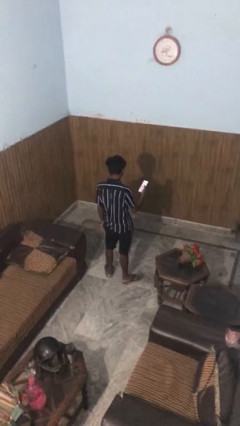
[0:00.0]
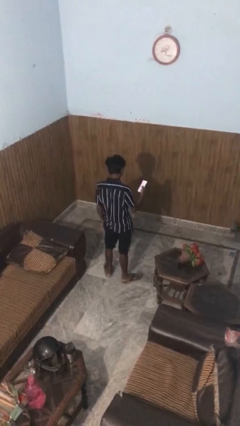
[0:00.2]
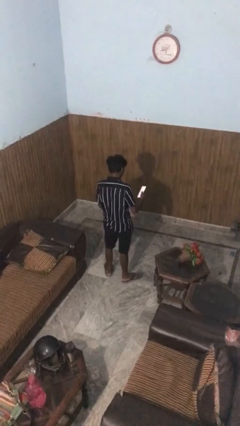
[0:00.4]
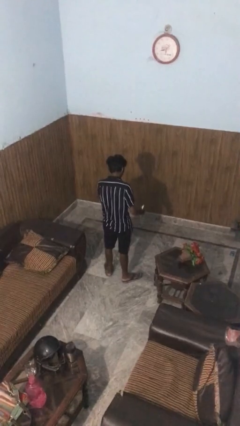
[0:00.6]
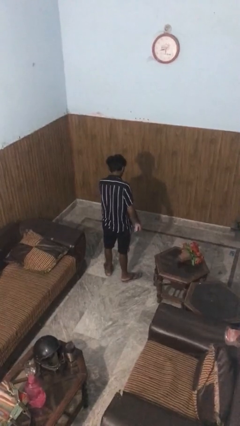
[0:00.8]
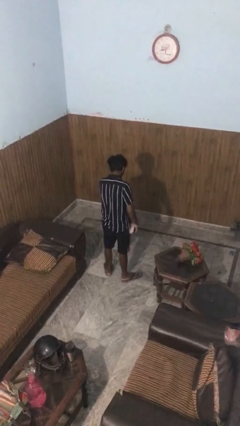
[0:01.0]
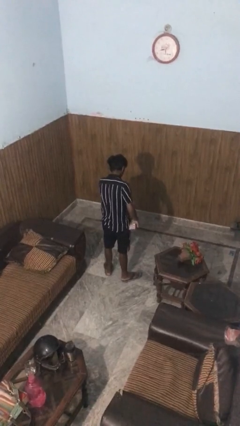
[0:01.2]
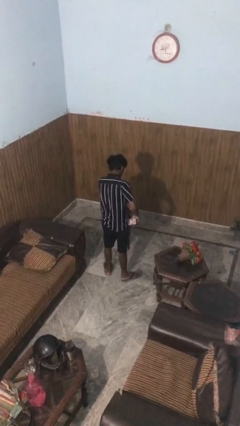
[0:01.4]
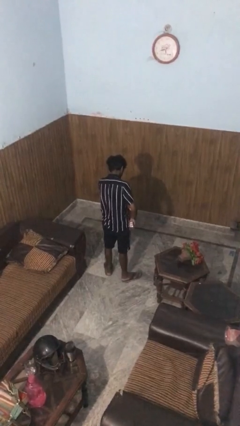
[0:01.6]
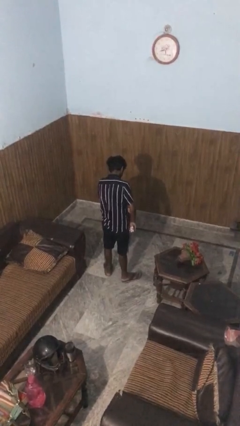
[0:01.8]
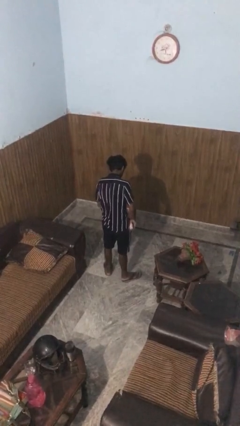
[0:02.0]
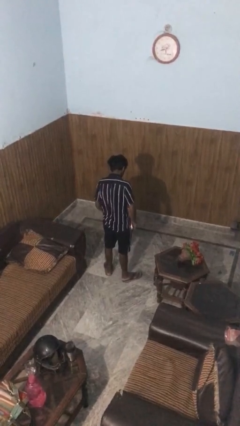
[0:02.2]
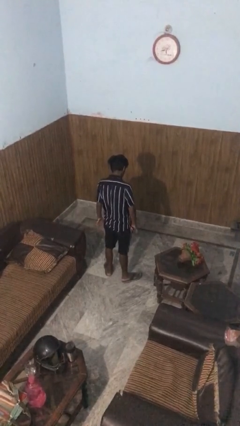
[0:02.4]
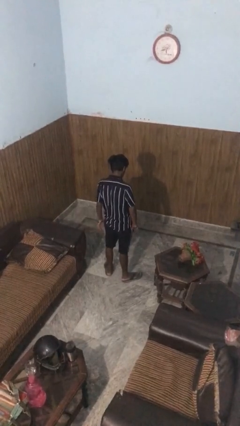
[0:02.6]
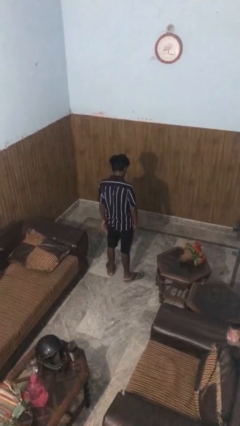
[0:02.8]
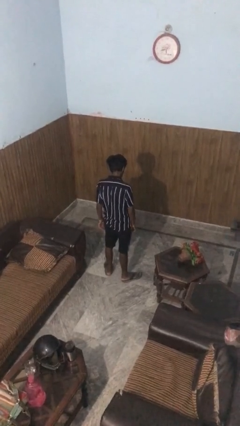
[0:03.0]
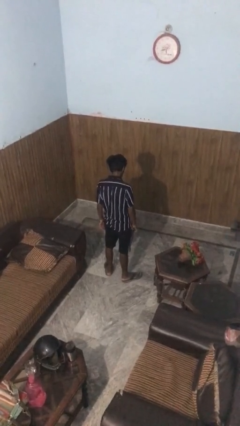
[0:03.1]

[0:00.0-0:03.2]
person puts phone into pocket

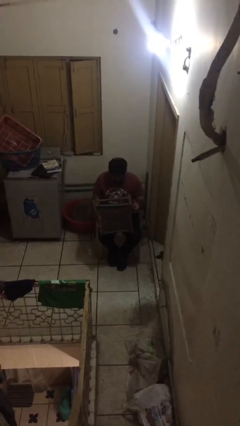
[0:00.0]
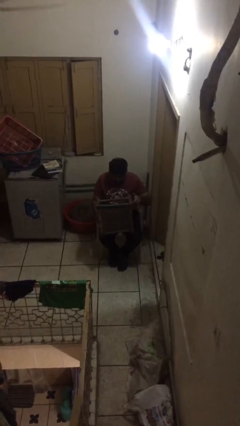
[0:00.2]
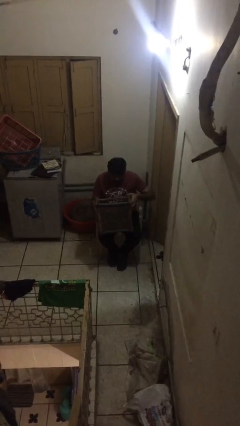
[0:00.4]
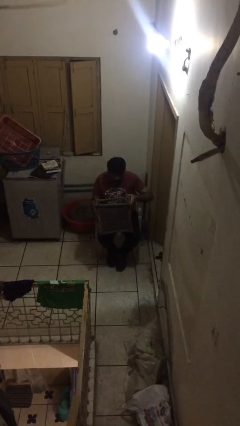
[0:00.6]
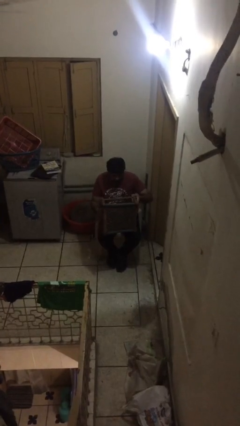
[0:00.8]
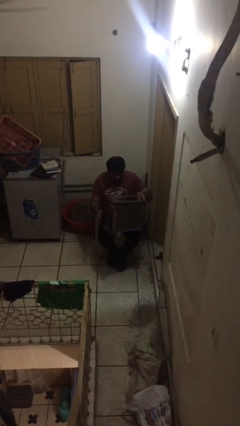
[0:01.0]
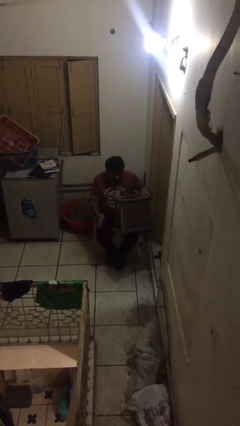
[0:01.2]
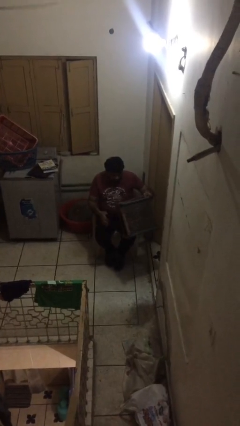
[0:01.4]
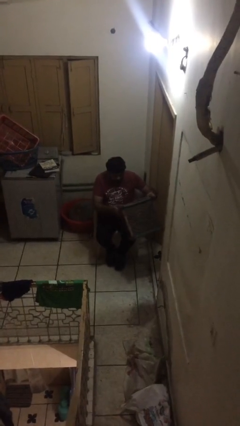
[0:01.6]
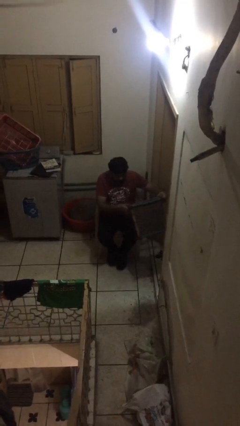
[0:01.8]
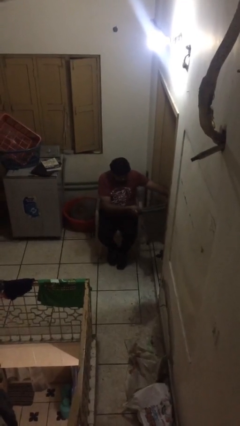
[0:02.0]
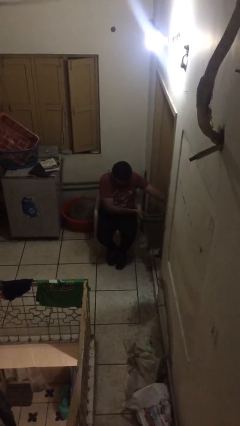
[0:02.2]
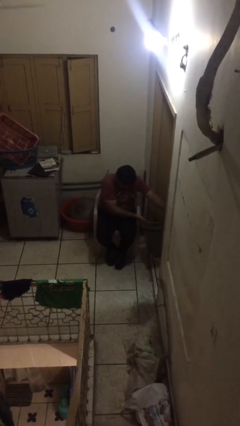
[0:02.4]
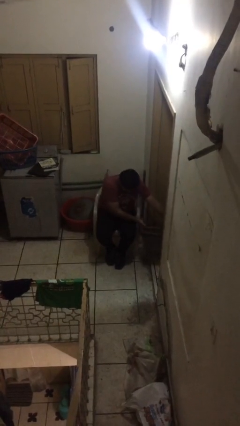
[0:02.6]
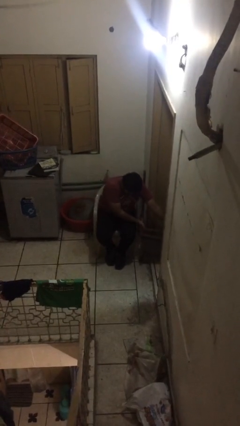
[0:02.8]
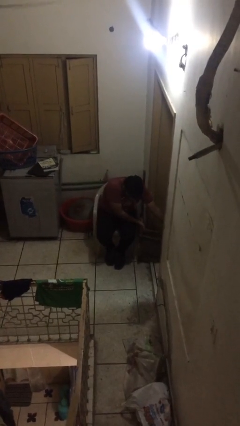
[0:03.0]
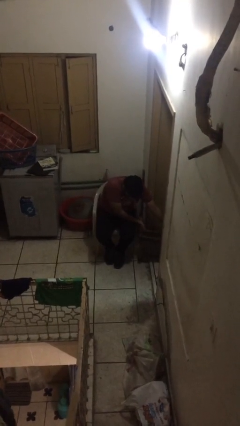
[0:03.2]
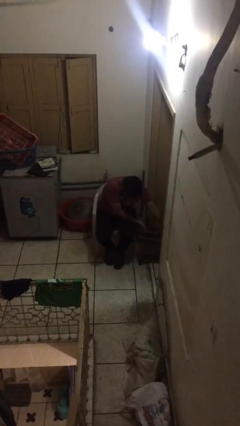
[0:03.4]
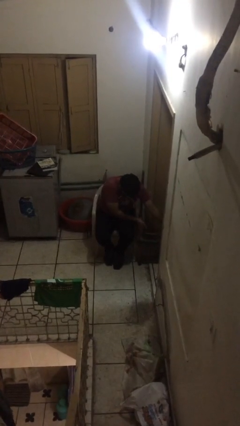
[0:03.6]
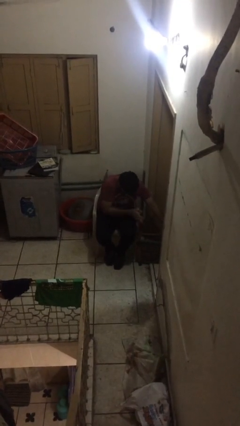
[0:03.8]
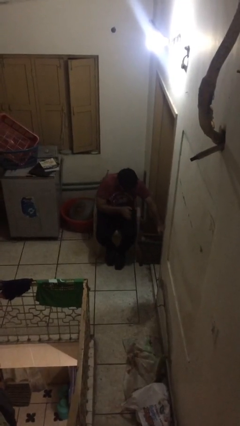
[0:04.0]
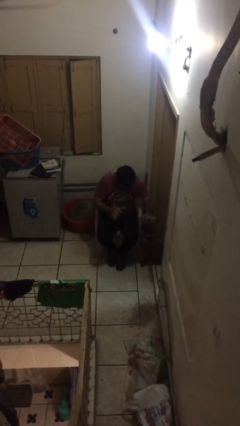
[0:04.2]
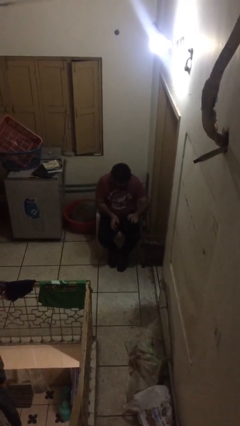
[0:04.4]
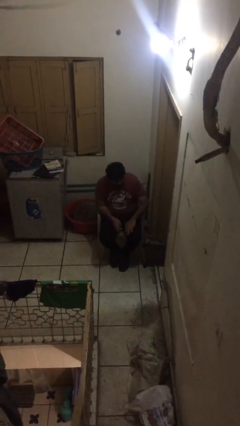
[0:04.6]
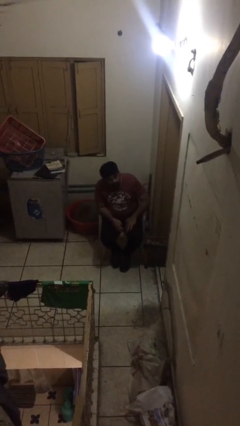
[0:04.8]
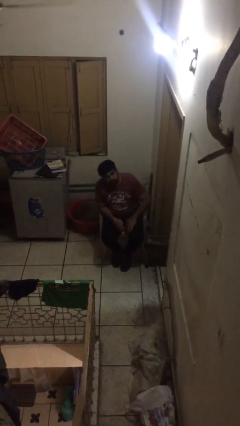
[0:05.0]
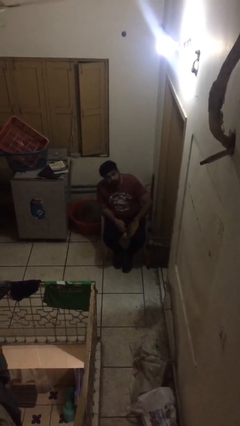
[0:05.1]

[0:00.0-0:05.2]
person puts down object on floor

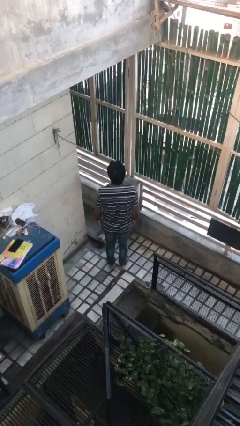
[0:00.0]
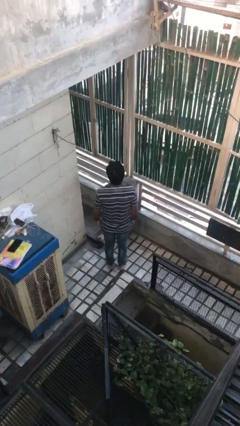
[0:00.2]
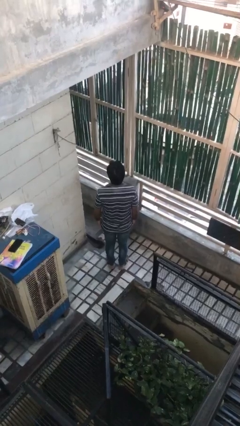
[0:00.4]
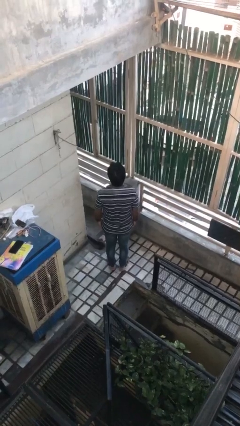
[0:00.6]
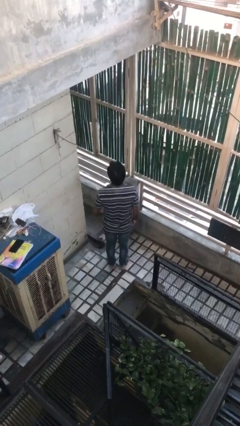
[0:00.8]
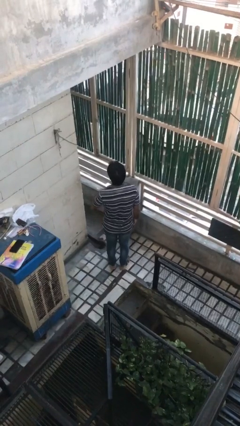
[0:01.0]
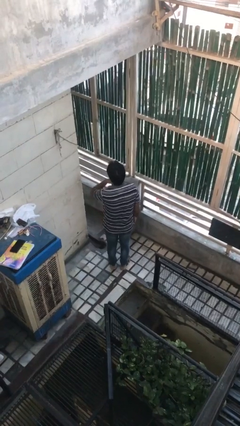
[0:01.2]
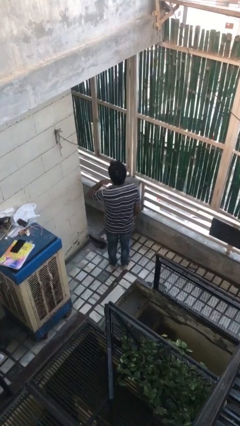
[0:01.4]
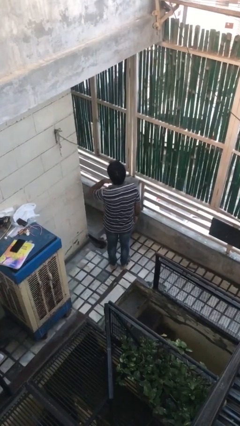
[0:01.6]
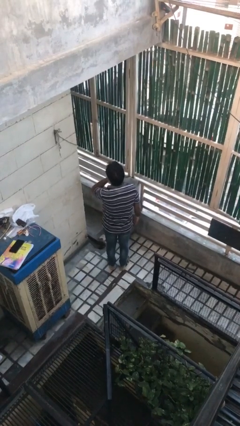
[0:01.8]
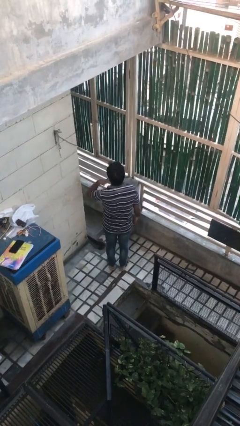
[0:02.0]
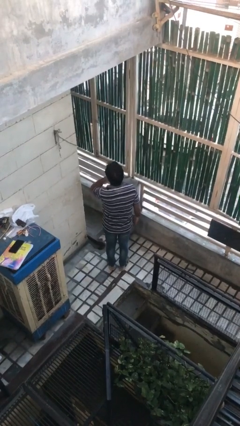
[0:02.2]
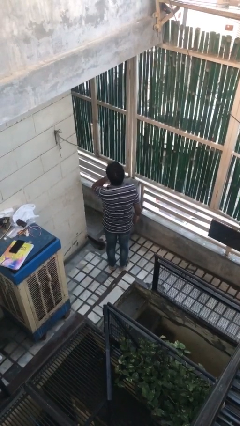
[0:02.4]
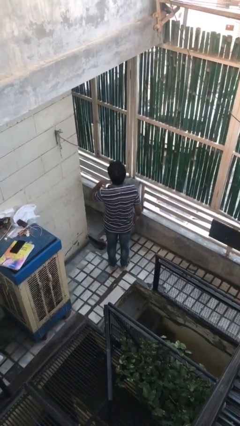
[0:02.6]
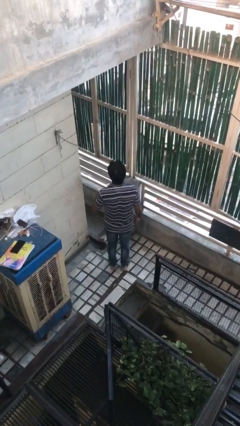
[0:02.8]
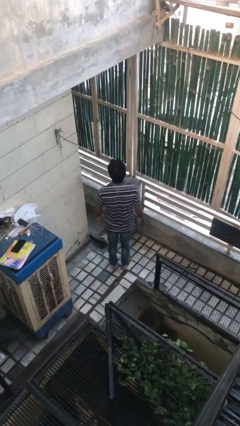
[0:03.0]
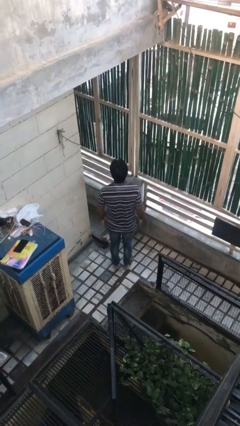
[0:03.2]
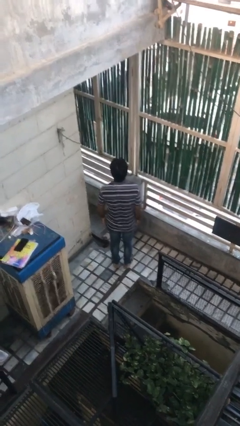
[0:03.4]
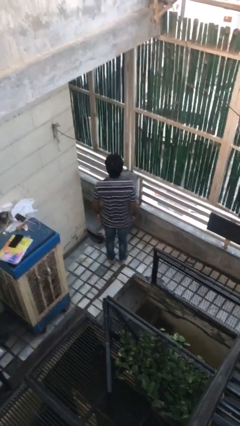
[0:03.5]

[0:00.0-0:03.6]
person gestures cut

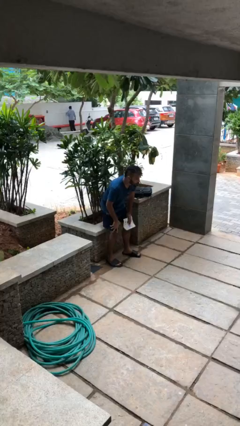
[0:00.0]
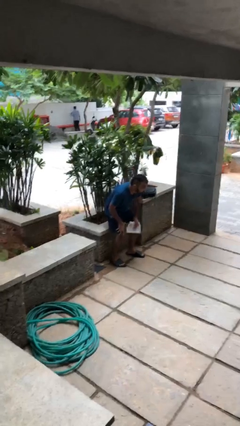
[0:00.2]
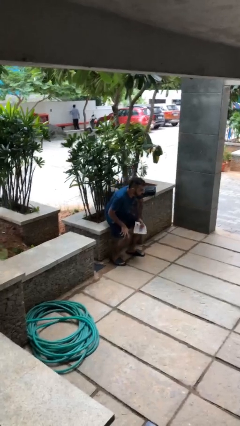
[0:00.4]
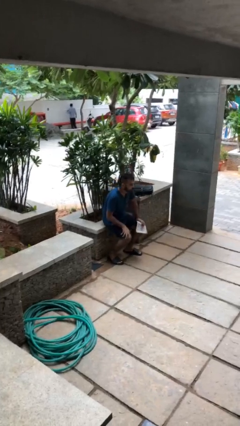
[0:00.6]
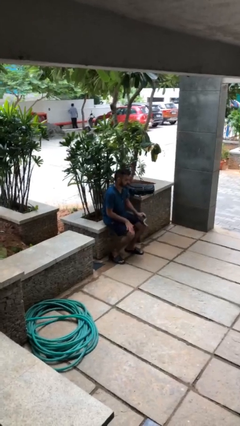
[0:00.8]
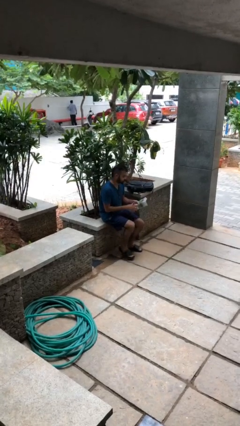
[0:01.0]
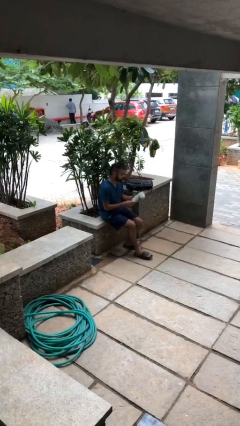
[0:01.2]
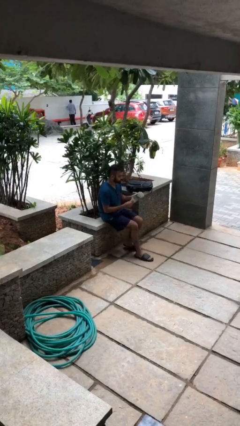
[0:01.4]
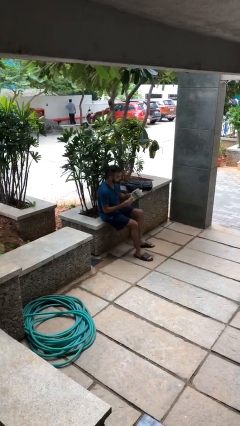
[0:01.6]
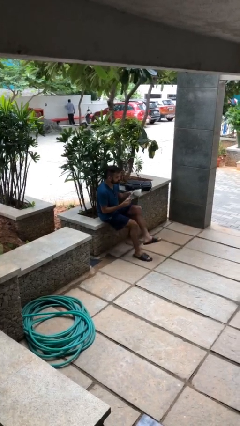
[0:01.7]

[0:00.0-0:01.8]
person sits down

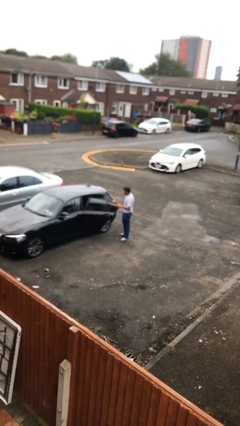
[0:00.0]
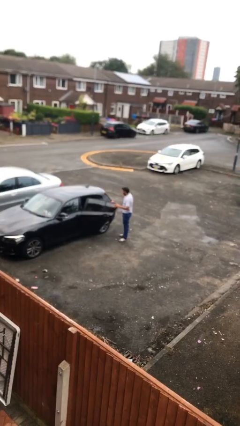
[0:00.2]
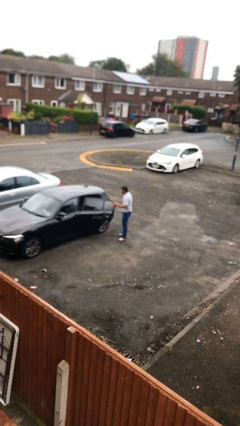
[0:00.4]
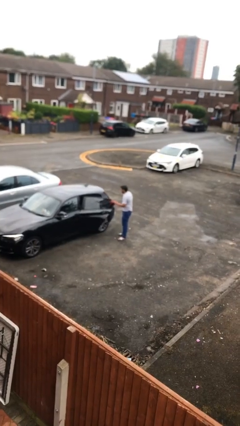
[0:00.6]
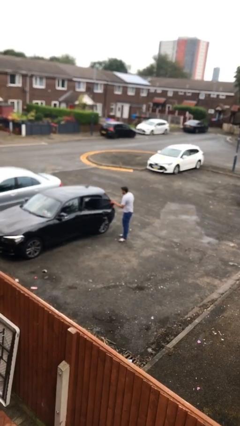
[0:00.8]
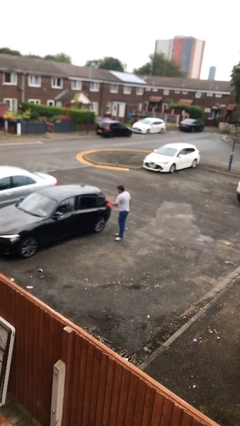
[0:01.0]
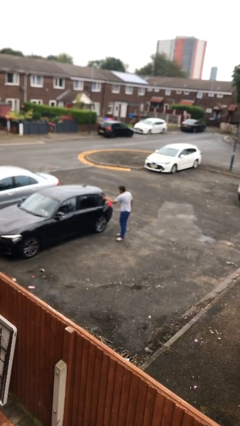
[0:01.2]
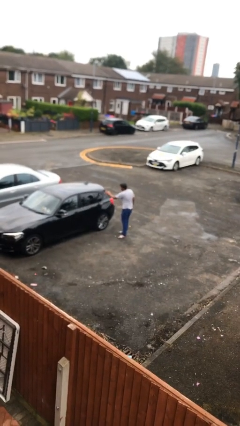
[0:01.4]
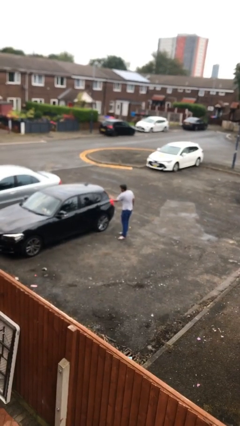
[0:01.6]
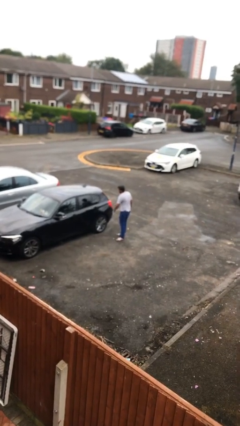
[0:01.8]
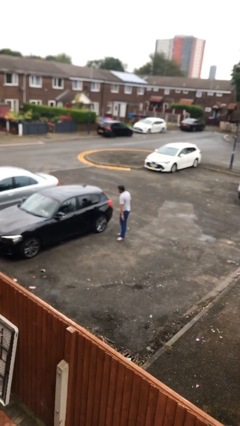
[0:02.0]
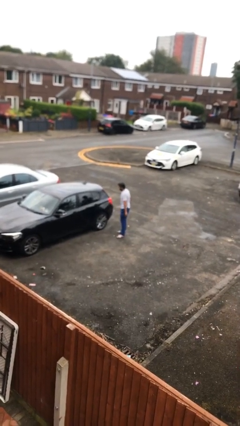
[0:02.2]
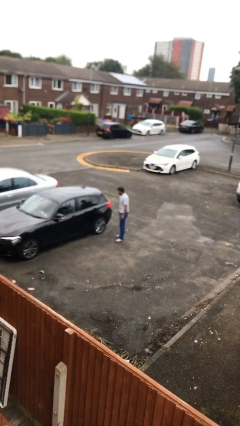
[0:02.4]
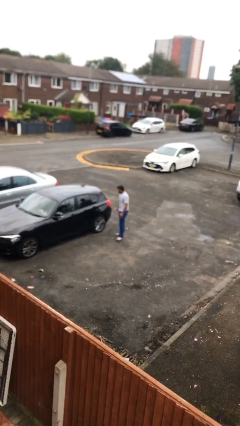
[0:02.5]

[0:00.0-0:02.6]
person closes car door

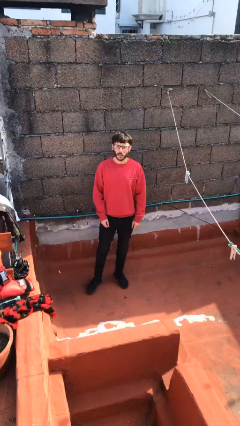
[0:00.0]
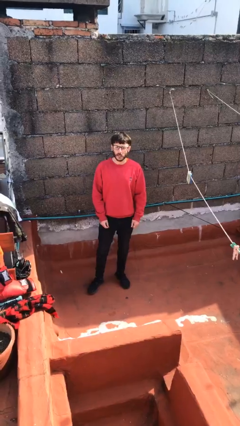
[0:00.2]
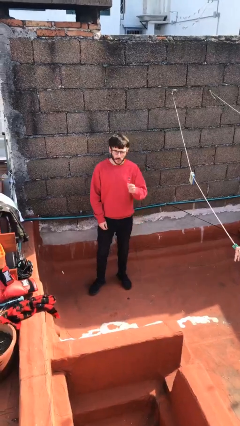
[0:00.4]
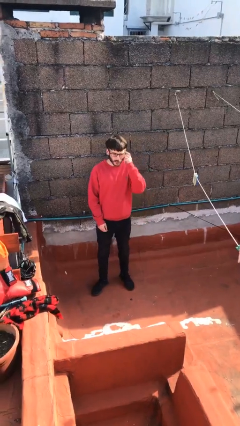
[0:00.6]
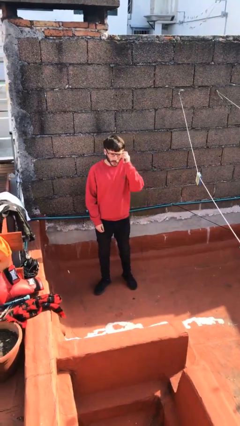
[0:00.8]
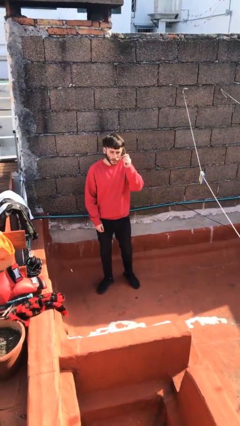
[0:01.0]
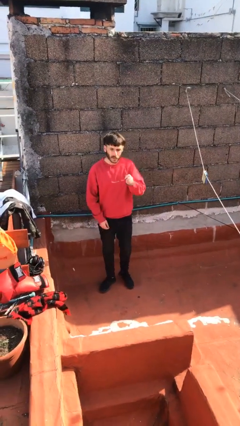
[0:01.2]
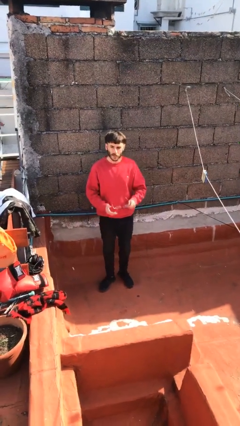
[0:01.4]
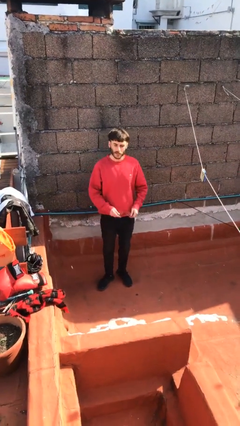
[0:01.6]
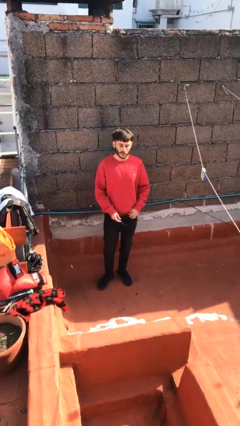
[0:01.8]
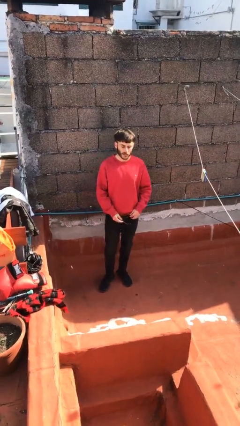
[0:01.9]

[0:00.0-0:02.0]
person takes off glasses
